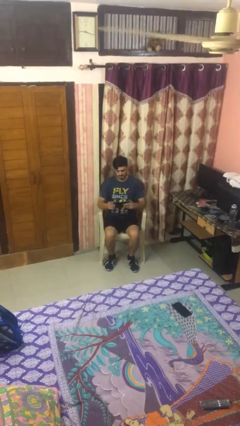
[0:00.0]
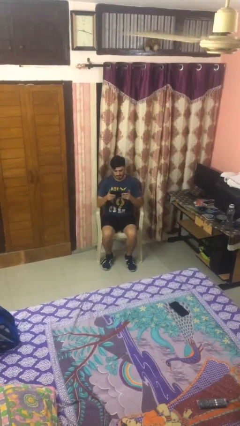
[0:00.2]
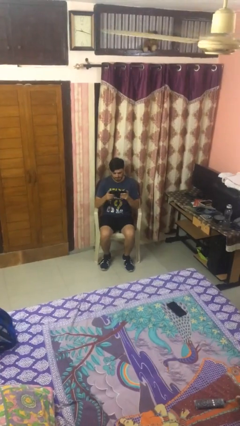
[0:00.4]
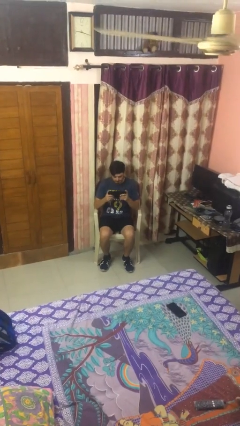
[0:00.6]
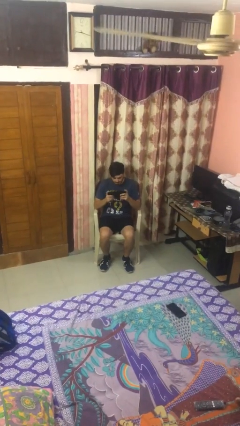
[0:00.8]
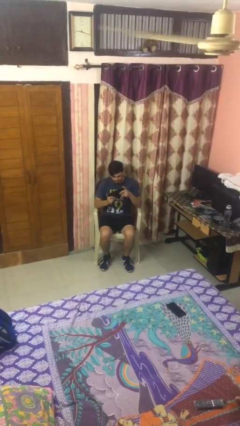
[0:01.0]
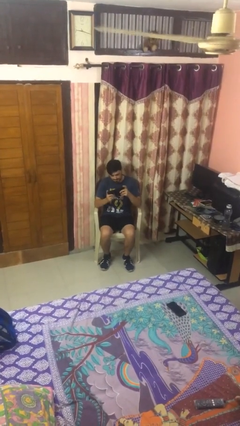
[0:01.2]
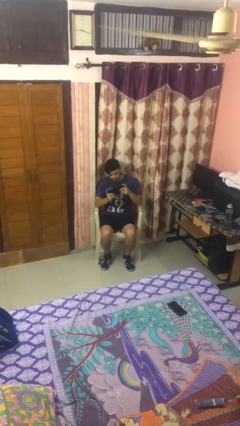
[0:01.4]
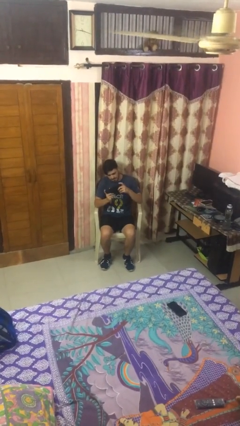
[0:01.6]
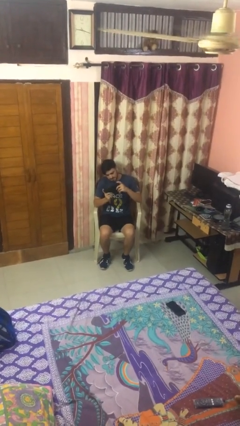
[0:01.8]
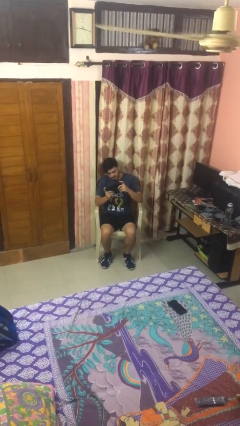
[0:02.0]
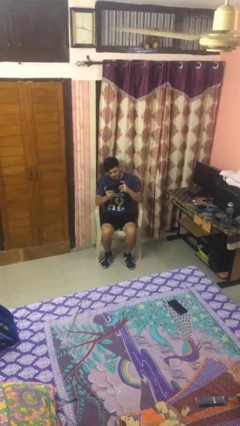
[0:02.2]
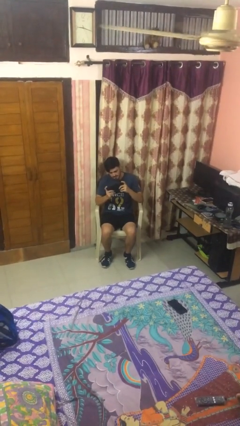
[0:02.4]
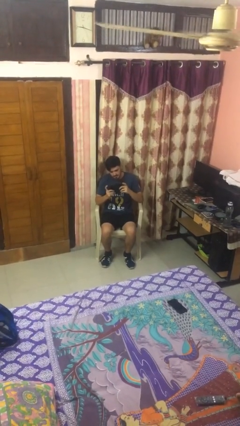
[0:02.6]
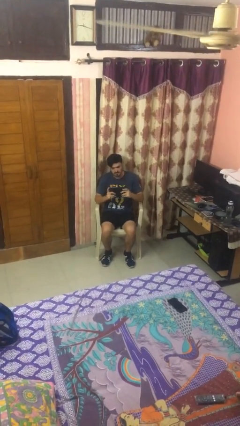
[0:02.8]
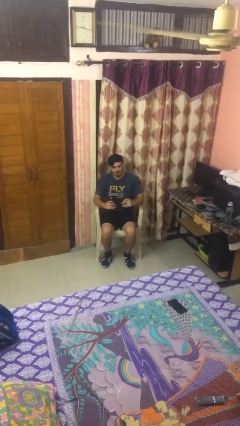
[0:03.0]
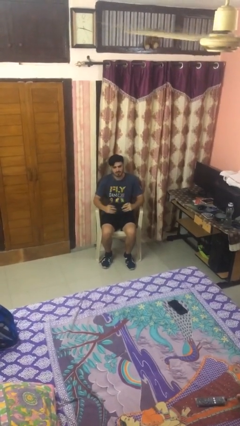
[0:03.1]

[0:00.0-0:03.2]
person interacts with handheld game

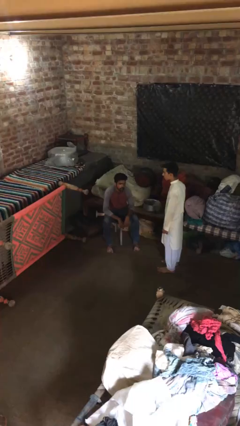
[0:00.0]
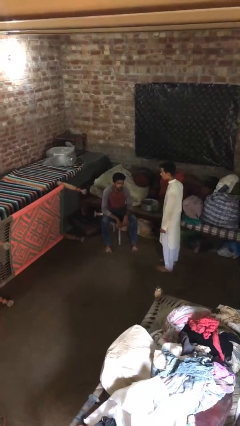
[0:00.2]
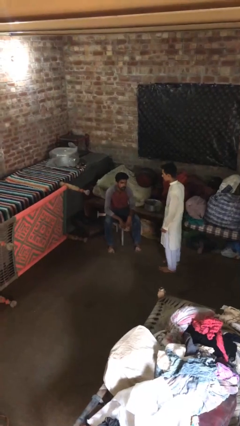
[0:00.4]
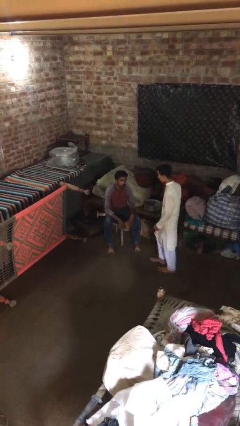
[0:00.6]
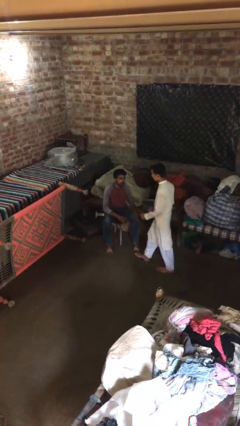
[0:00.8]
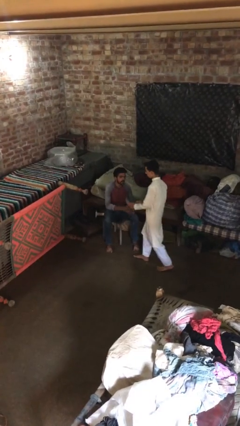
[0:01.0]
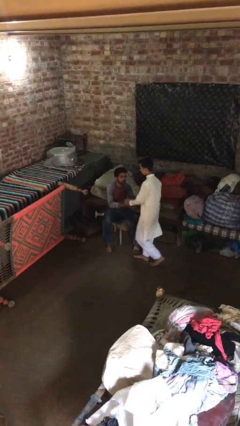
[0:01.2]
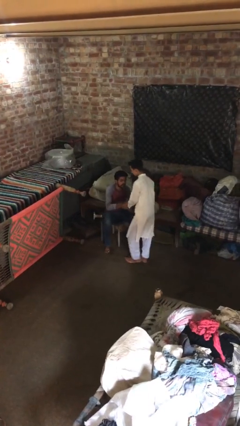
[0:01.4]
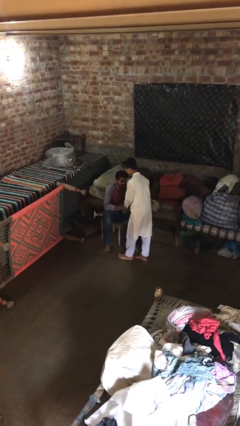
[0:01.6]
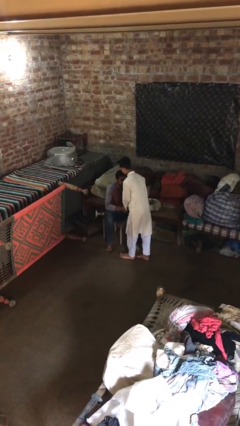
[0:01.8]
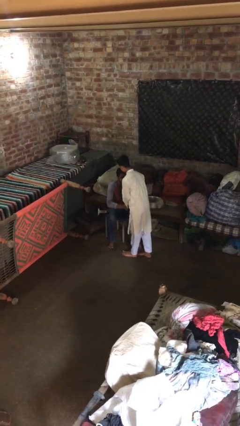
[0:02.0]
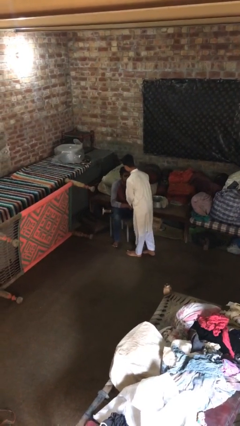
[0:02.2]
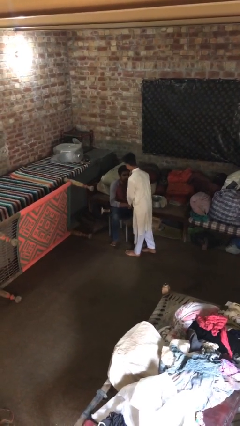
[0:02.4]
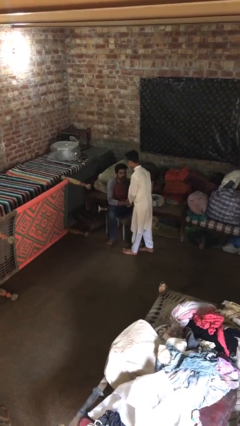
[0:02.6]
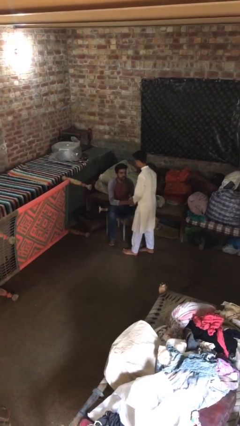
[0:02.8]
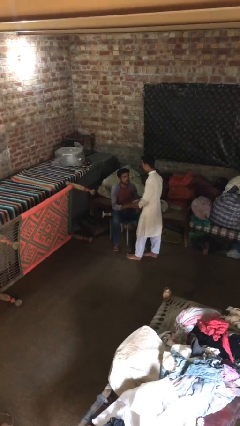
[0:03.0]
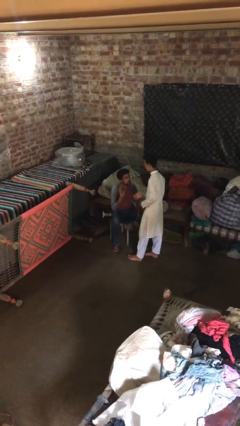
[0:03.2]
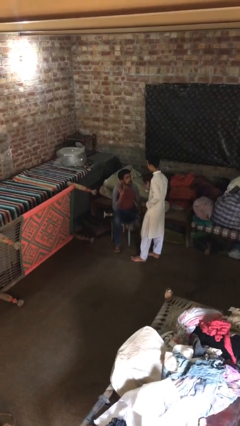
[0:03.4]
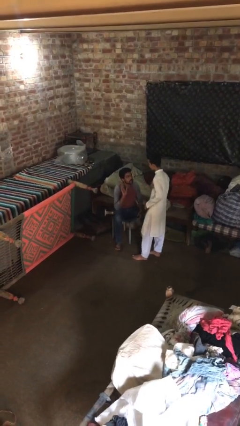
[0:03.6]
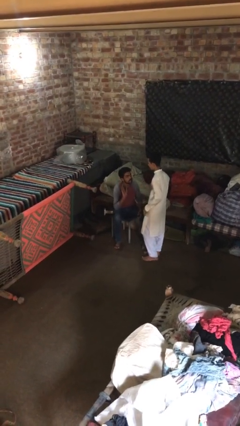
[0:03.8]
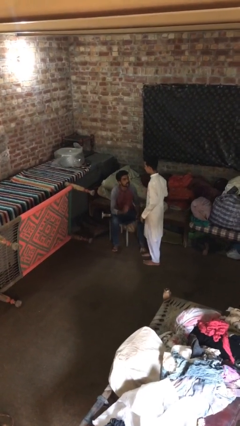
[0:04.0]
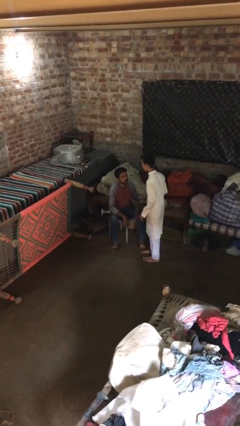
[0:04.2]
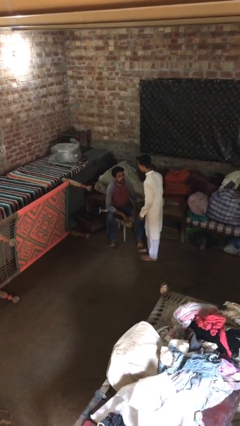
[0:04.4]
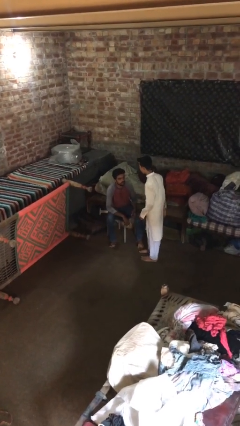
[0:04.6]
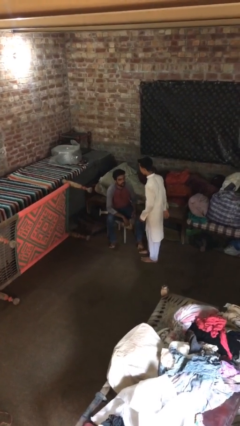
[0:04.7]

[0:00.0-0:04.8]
person shakes hand

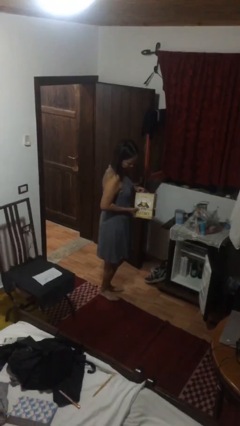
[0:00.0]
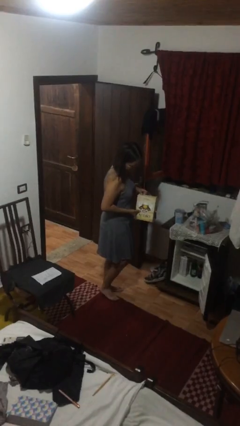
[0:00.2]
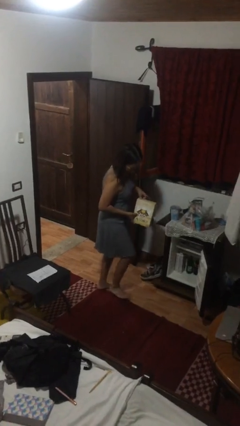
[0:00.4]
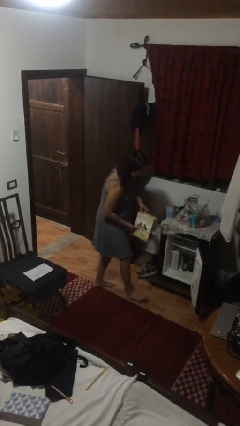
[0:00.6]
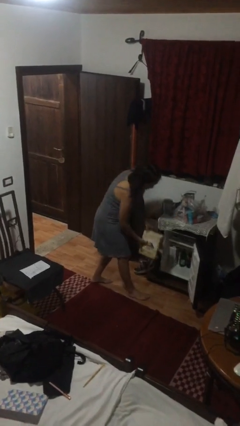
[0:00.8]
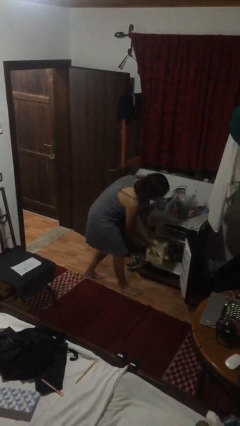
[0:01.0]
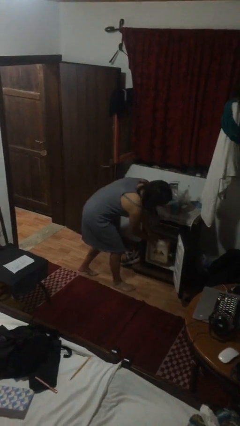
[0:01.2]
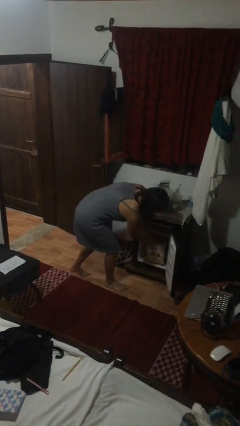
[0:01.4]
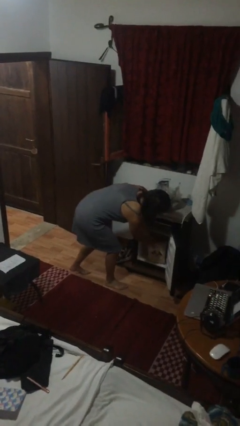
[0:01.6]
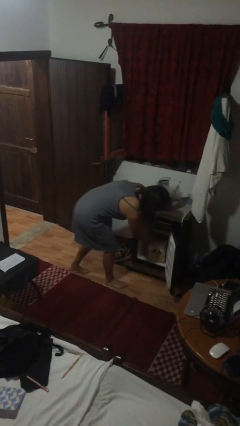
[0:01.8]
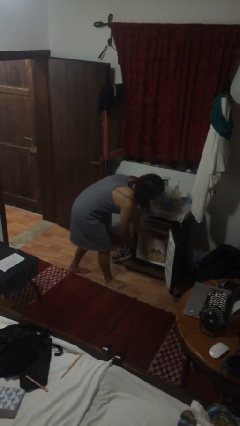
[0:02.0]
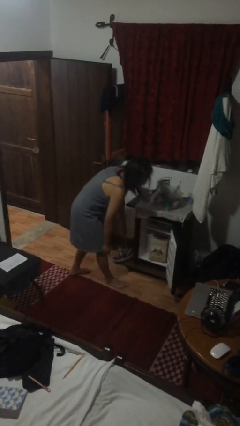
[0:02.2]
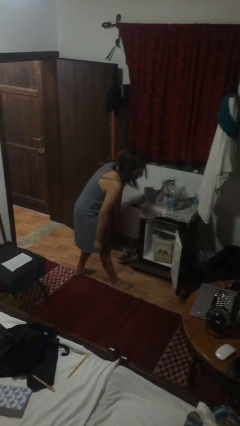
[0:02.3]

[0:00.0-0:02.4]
person puts down object into cabinet

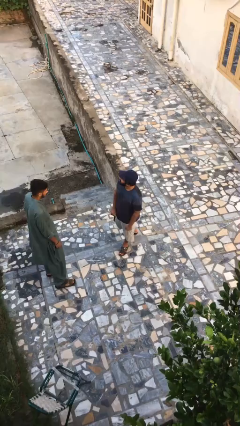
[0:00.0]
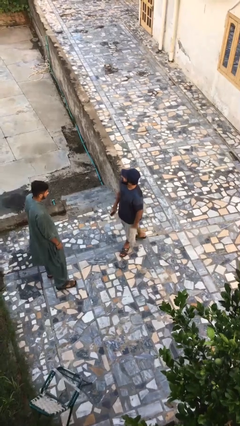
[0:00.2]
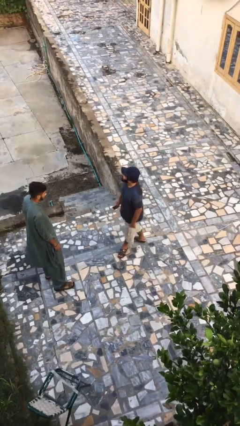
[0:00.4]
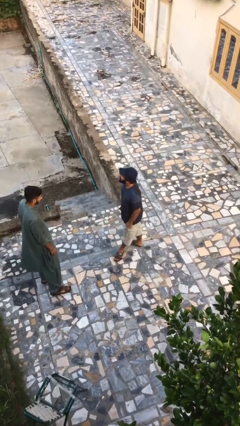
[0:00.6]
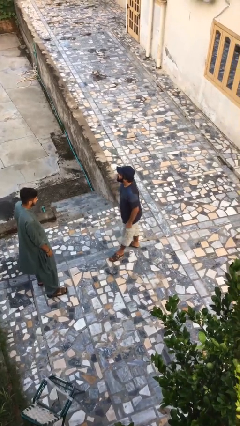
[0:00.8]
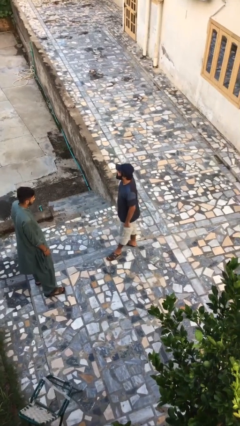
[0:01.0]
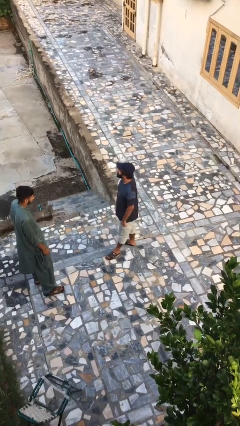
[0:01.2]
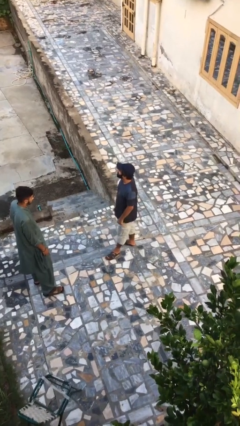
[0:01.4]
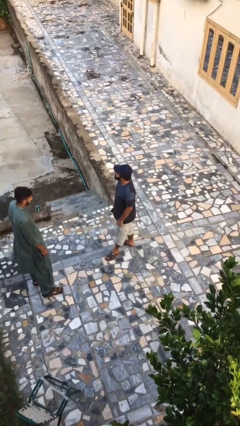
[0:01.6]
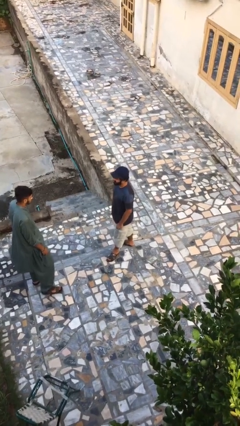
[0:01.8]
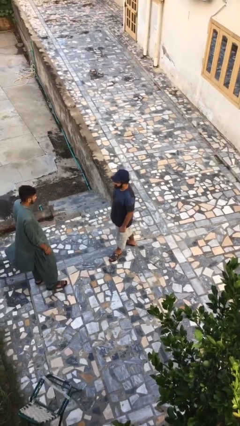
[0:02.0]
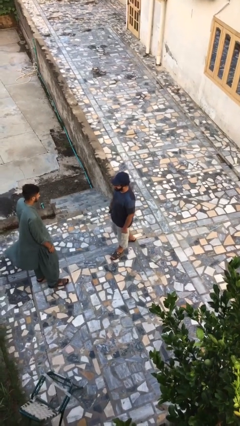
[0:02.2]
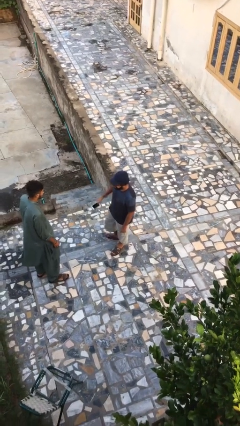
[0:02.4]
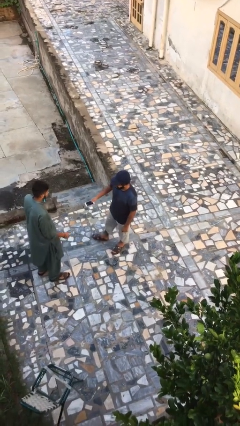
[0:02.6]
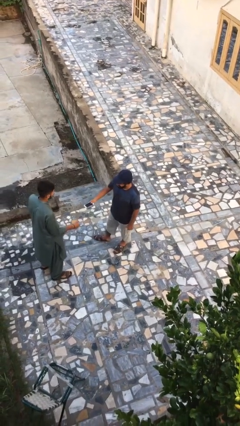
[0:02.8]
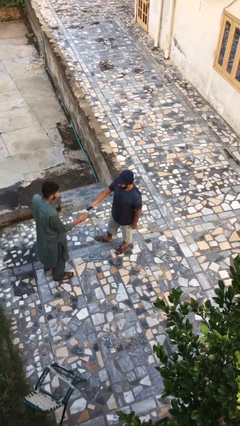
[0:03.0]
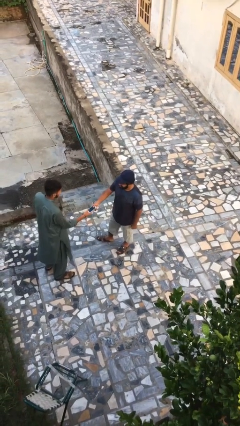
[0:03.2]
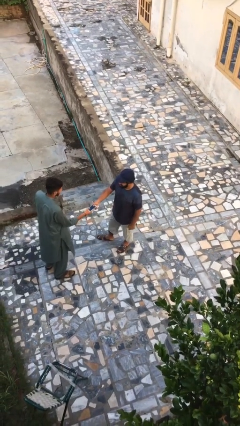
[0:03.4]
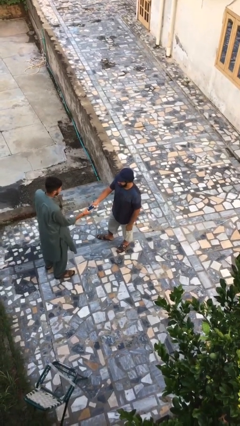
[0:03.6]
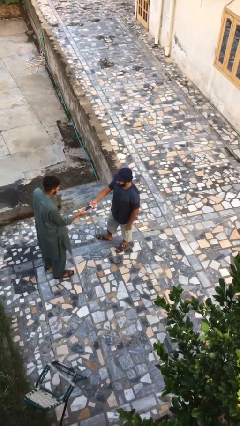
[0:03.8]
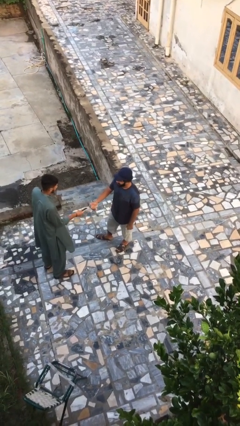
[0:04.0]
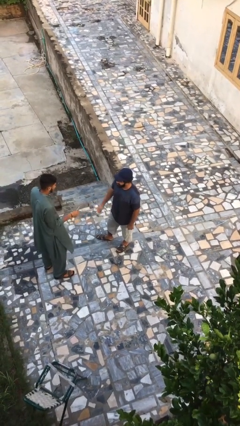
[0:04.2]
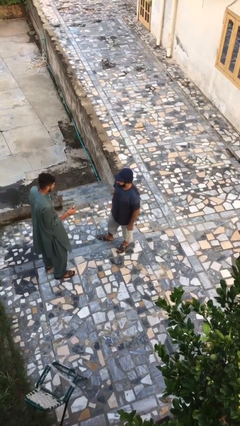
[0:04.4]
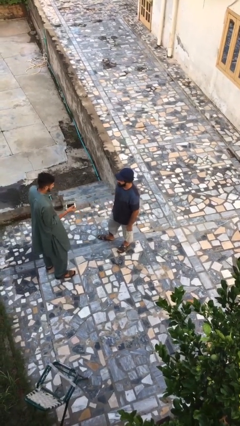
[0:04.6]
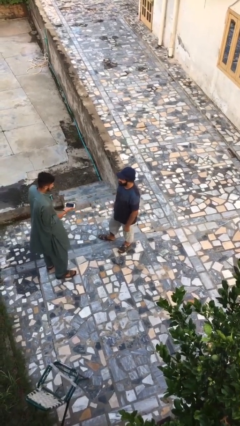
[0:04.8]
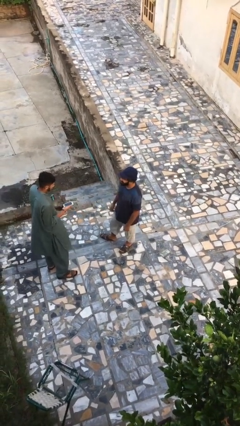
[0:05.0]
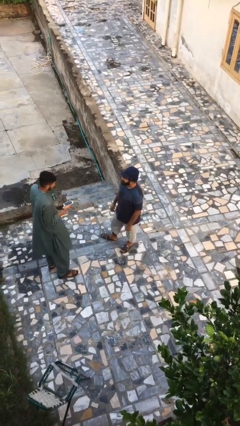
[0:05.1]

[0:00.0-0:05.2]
person transfers object to person

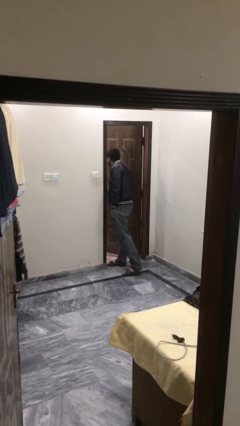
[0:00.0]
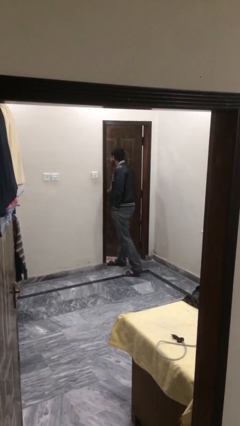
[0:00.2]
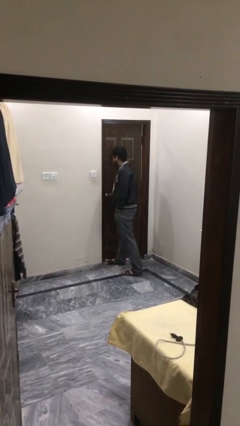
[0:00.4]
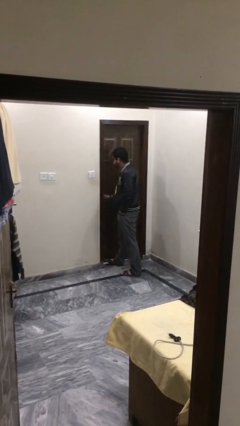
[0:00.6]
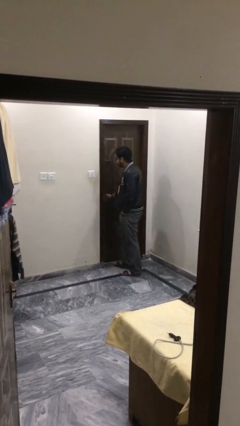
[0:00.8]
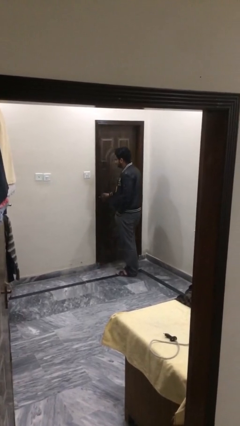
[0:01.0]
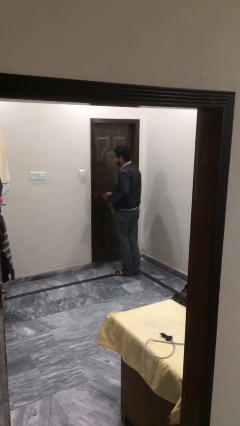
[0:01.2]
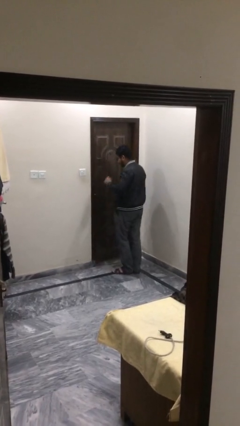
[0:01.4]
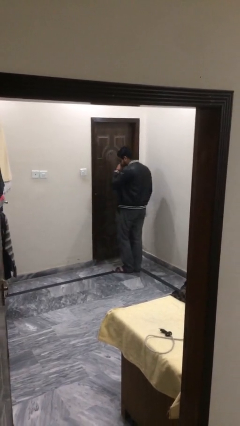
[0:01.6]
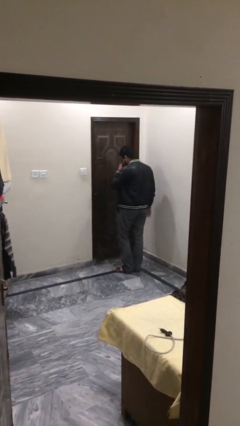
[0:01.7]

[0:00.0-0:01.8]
person closes facility door
